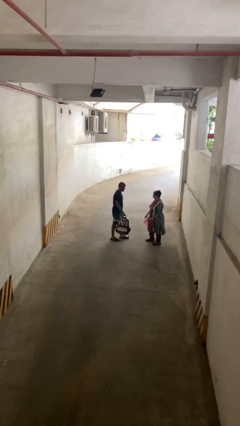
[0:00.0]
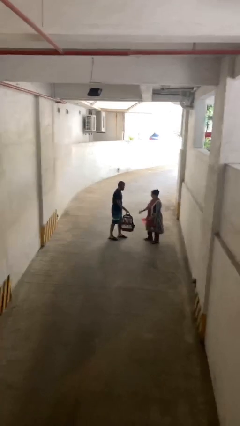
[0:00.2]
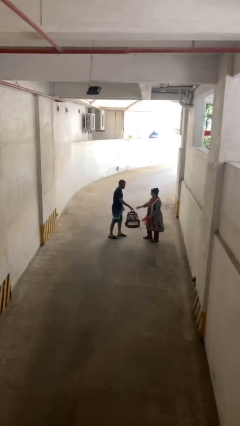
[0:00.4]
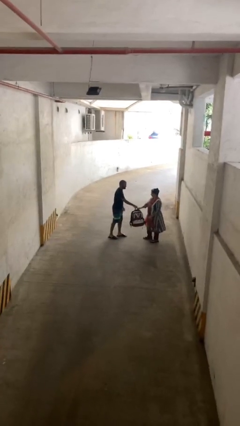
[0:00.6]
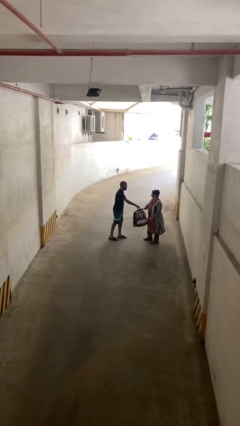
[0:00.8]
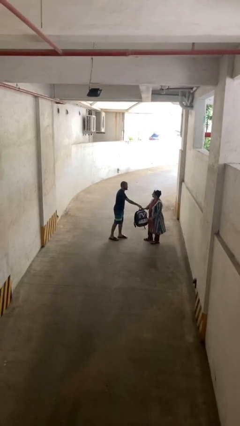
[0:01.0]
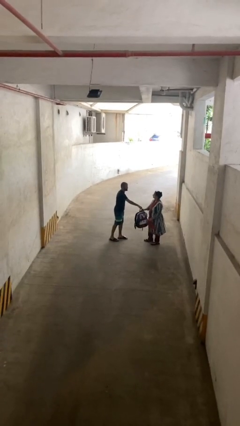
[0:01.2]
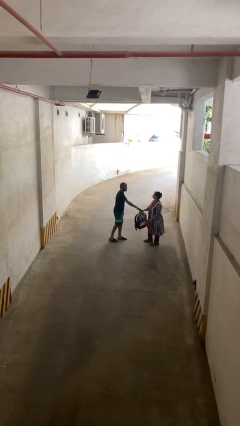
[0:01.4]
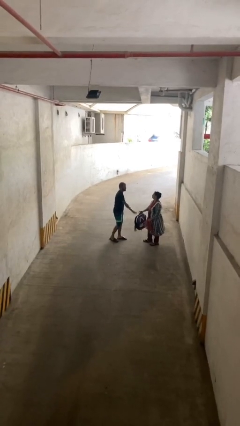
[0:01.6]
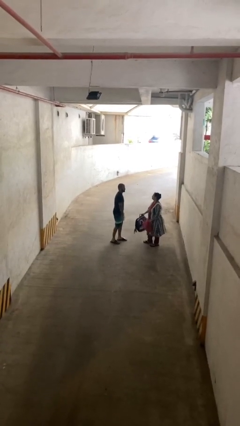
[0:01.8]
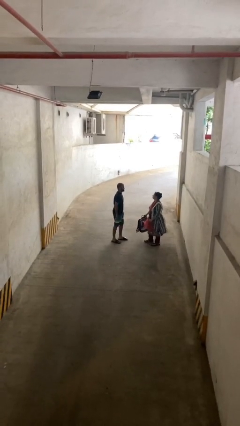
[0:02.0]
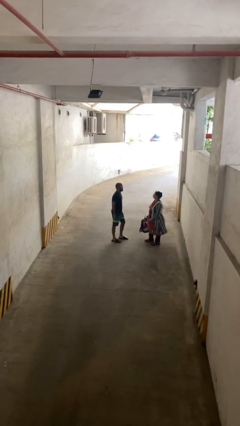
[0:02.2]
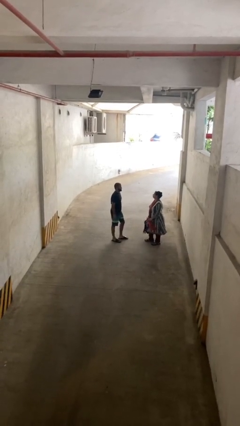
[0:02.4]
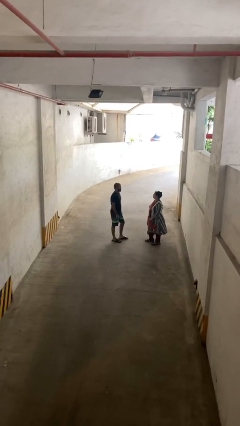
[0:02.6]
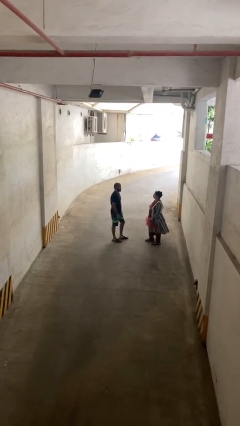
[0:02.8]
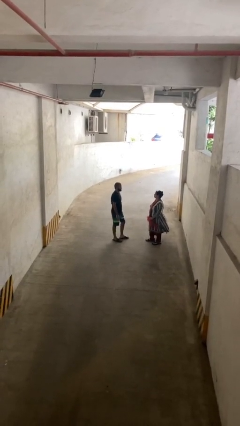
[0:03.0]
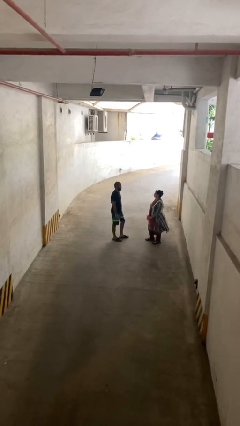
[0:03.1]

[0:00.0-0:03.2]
person transfers object to person

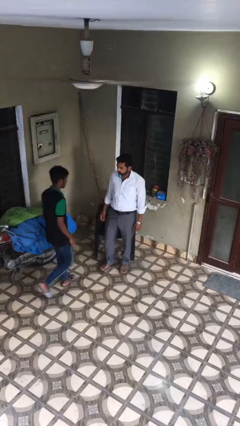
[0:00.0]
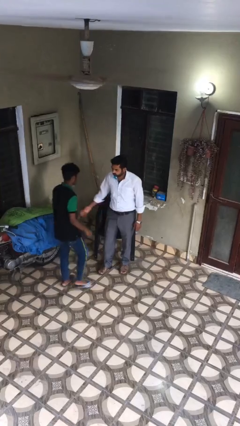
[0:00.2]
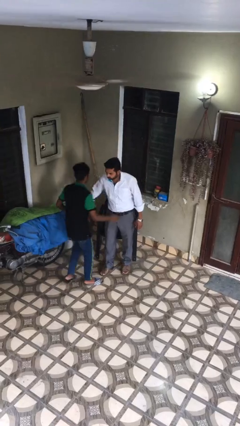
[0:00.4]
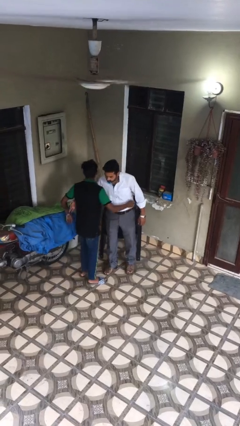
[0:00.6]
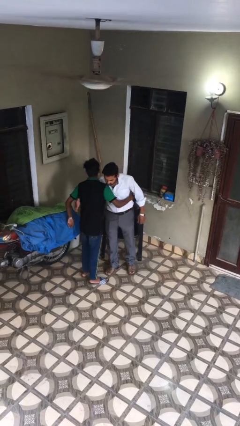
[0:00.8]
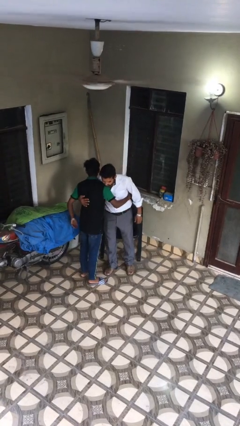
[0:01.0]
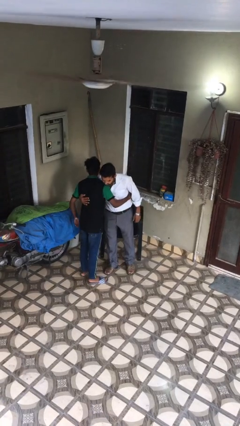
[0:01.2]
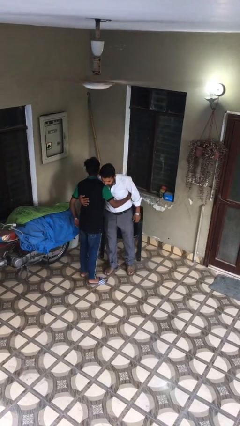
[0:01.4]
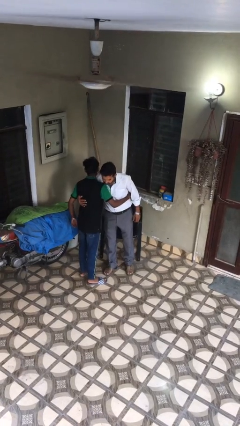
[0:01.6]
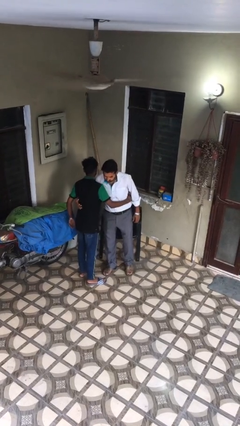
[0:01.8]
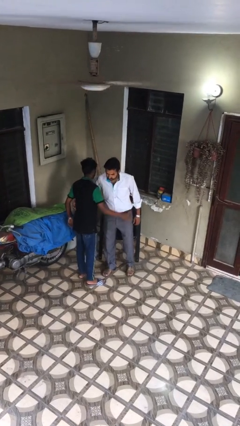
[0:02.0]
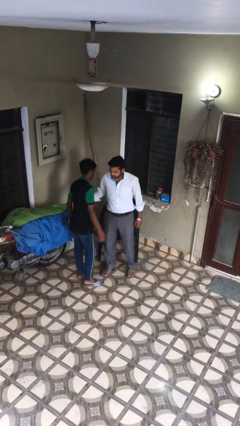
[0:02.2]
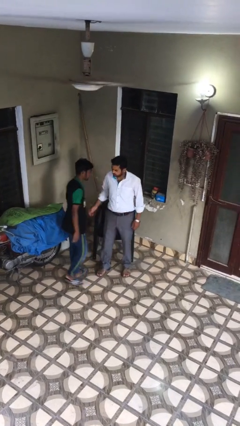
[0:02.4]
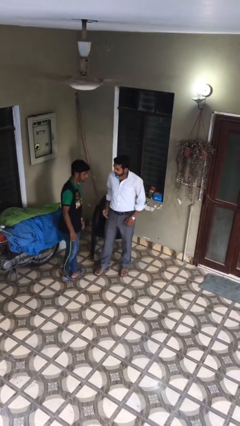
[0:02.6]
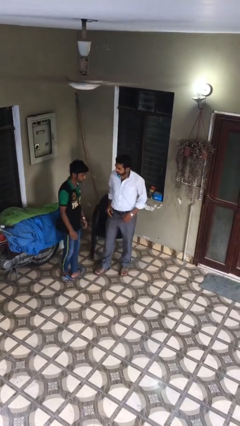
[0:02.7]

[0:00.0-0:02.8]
person embraces person

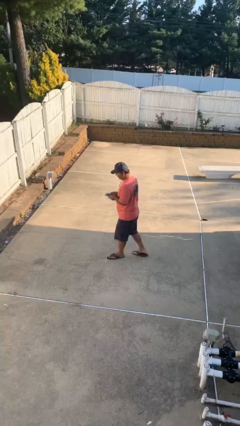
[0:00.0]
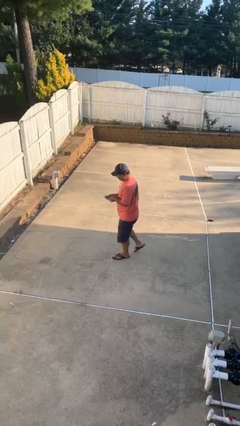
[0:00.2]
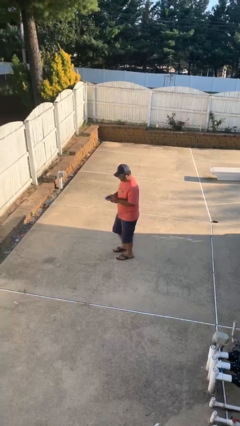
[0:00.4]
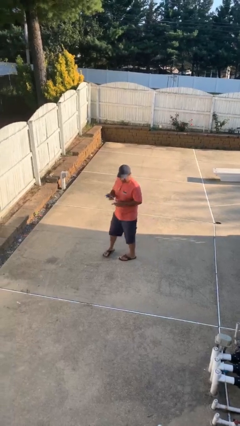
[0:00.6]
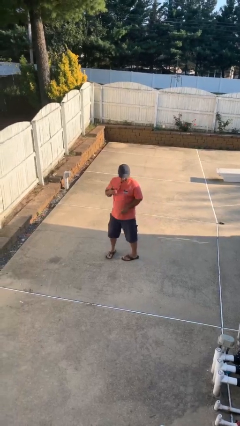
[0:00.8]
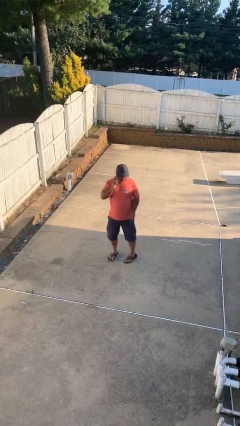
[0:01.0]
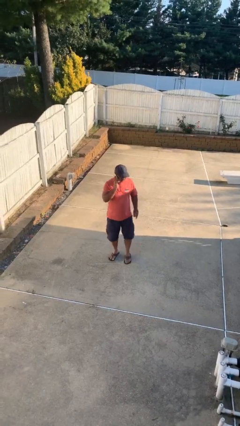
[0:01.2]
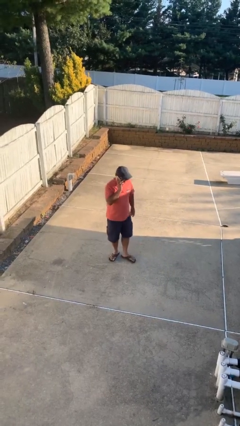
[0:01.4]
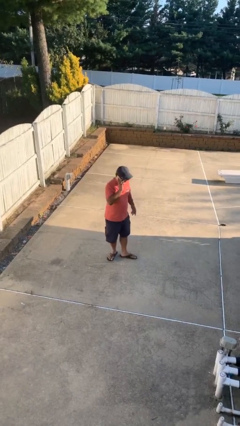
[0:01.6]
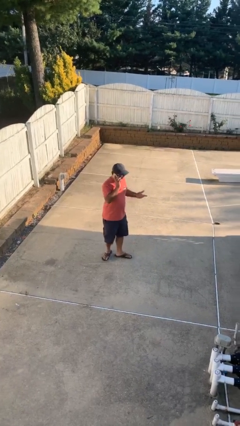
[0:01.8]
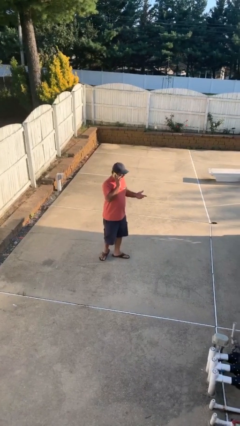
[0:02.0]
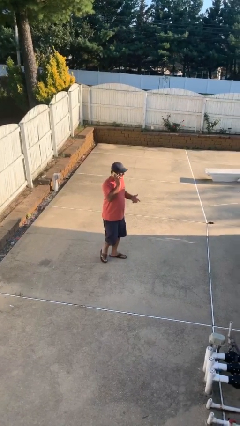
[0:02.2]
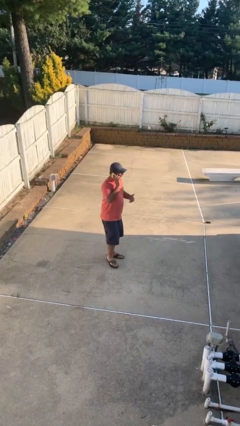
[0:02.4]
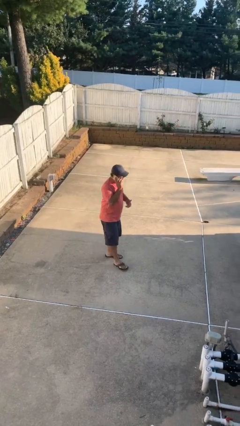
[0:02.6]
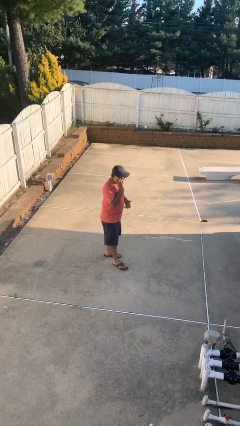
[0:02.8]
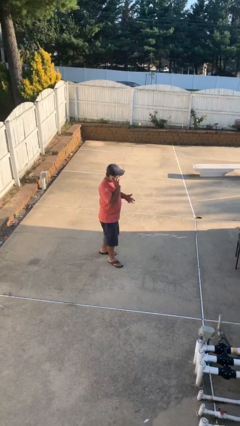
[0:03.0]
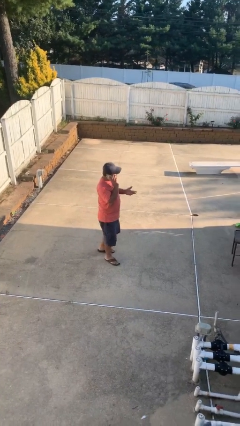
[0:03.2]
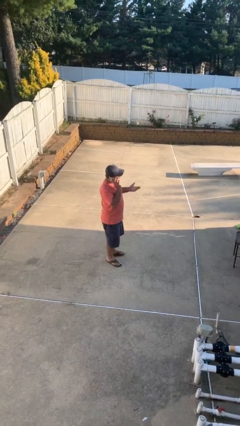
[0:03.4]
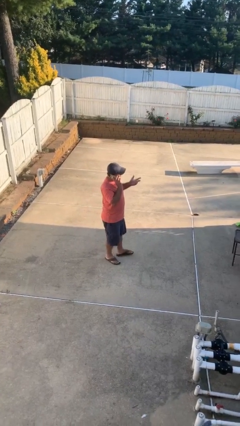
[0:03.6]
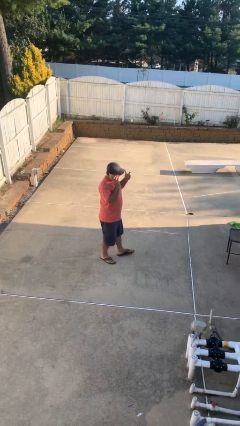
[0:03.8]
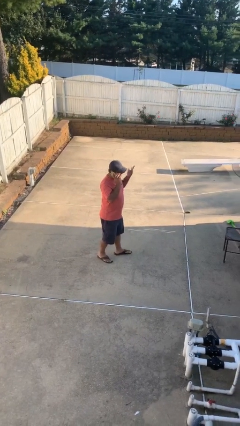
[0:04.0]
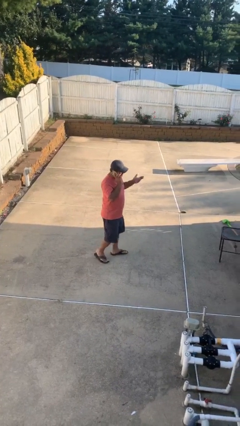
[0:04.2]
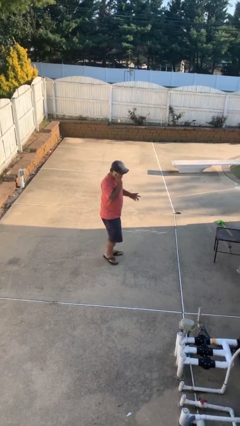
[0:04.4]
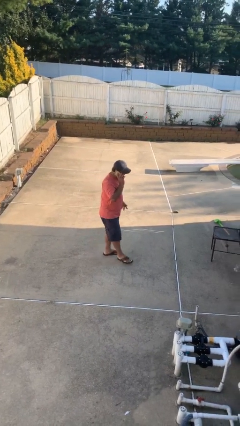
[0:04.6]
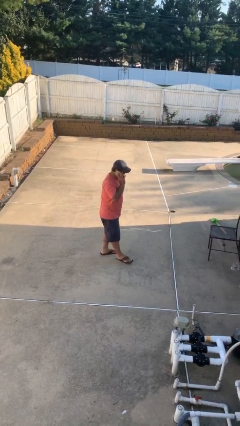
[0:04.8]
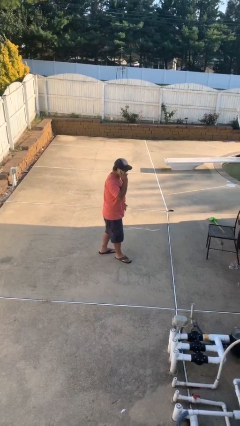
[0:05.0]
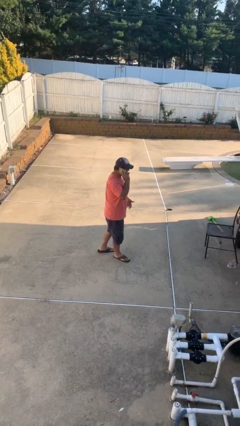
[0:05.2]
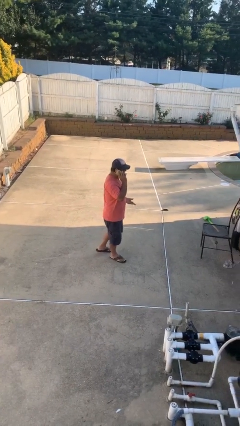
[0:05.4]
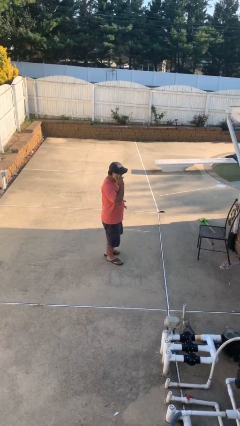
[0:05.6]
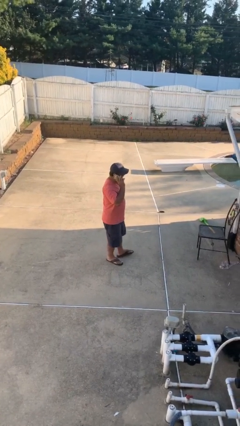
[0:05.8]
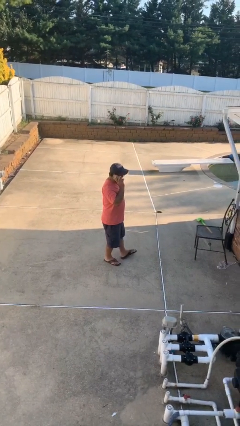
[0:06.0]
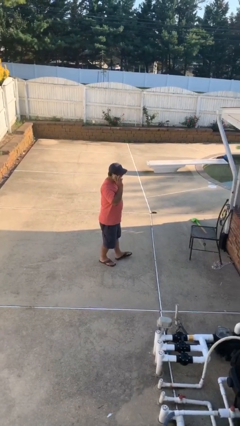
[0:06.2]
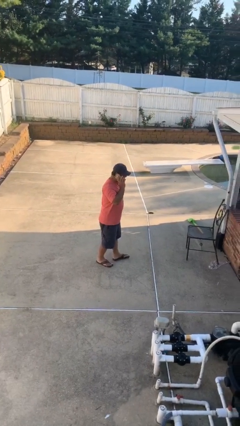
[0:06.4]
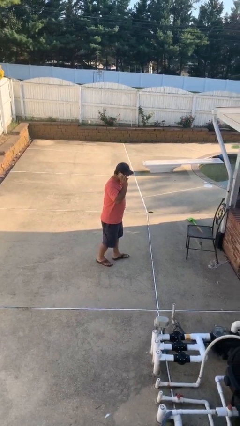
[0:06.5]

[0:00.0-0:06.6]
person talks on phone

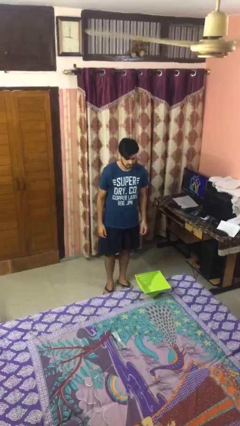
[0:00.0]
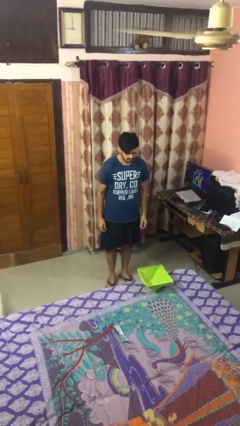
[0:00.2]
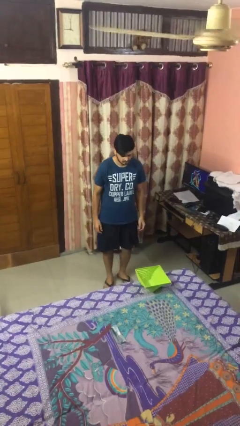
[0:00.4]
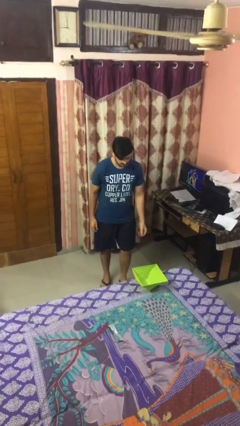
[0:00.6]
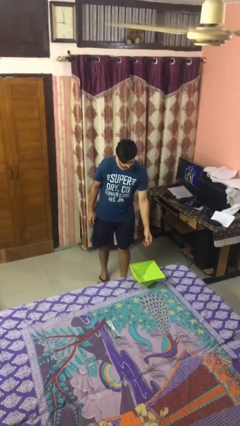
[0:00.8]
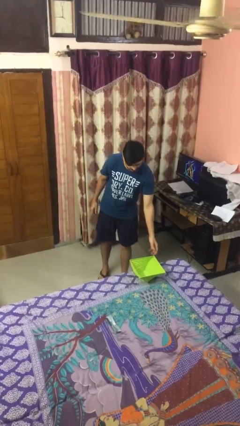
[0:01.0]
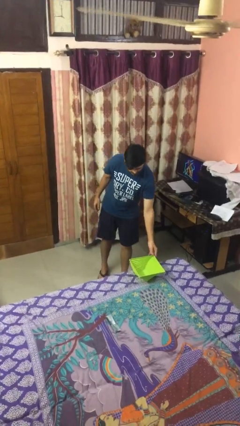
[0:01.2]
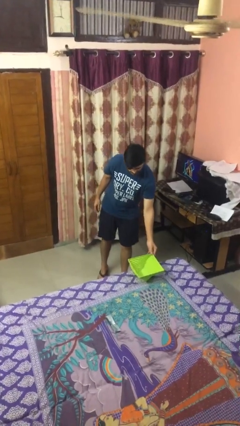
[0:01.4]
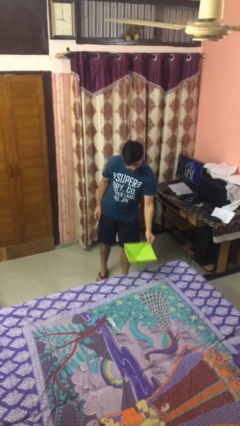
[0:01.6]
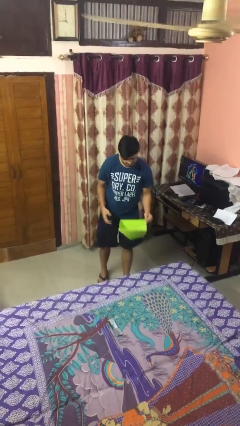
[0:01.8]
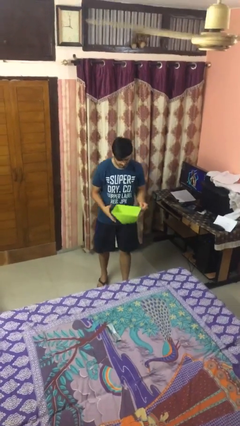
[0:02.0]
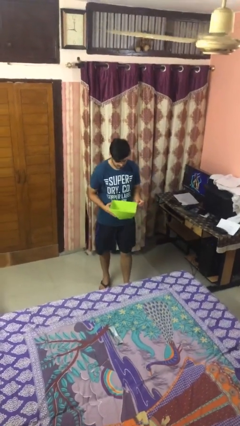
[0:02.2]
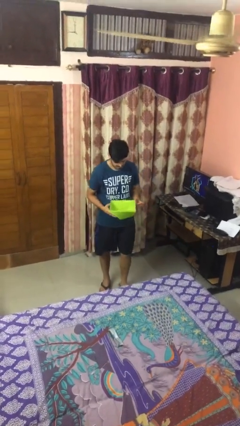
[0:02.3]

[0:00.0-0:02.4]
person picks up object from bed

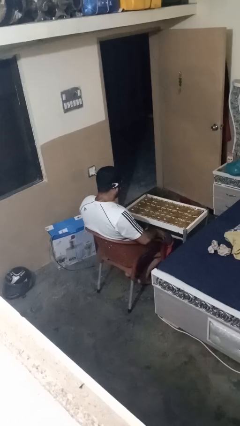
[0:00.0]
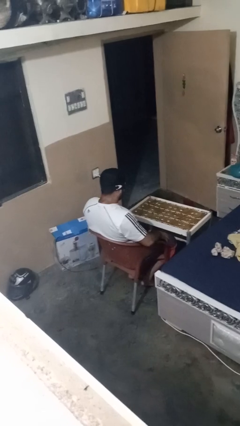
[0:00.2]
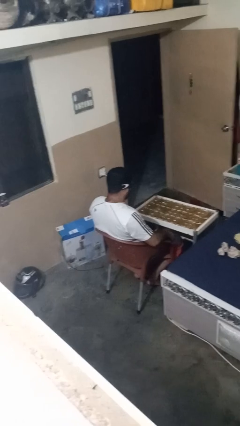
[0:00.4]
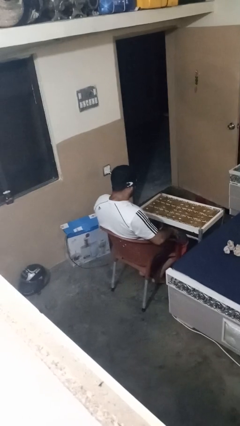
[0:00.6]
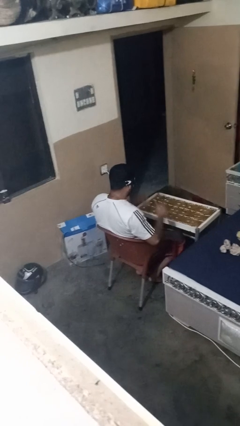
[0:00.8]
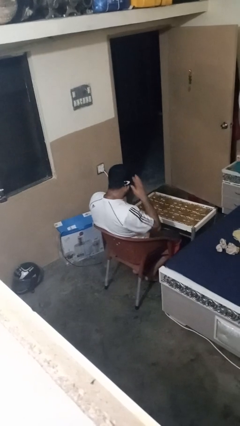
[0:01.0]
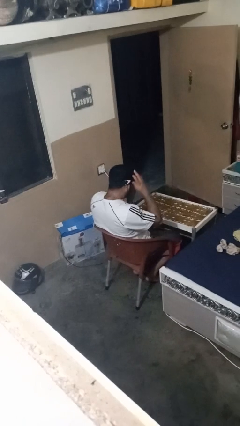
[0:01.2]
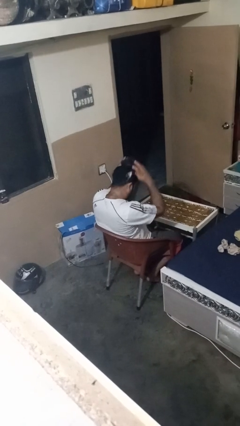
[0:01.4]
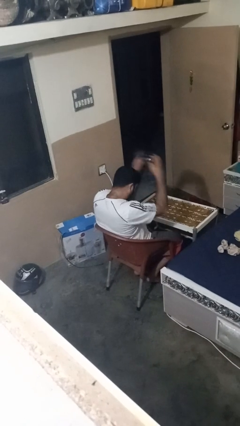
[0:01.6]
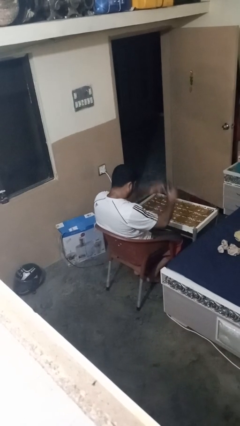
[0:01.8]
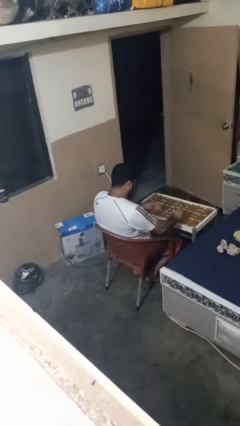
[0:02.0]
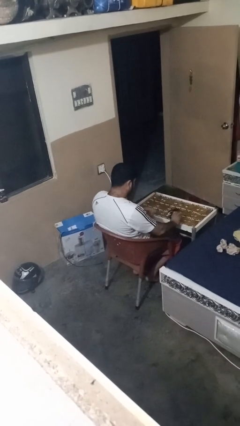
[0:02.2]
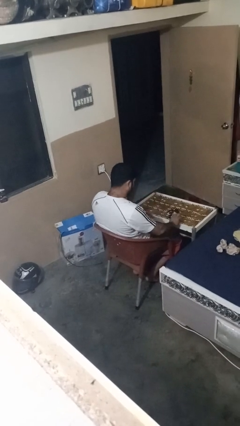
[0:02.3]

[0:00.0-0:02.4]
person takes off sunglasses

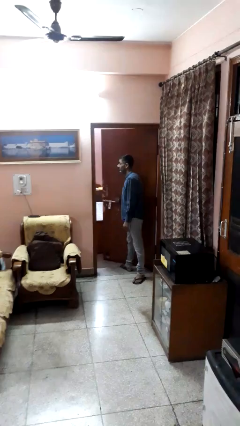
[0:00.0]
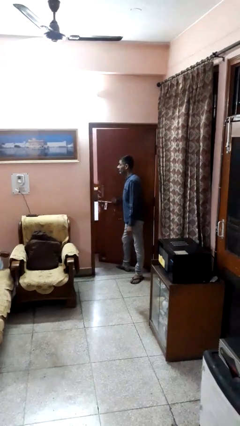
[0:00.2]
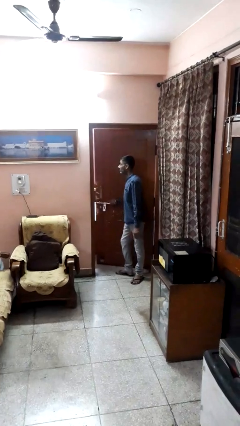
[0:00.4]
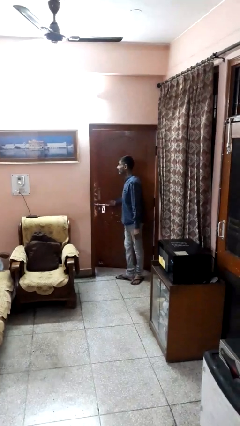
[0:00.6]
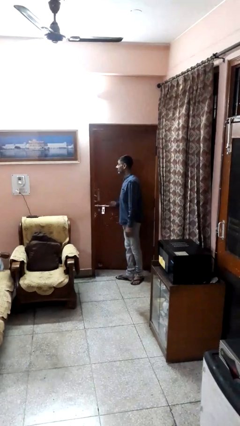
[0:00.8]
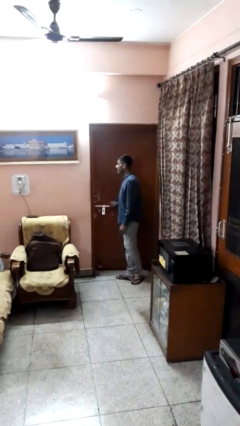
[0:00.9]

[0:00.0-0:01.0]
person closes facility door
